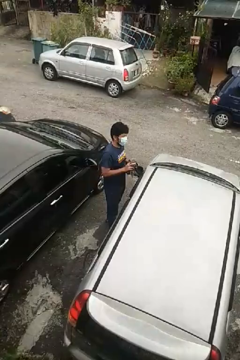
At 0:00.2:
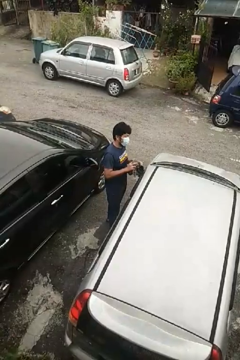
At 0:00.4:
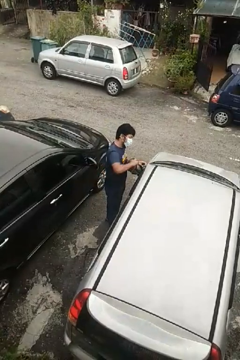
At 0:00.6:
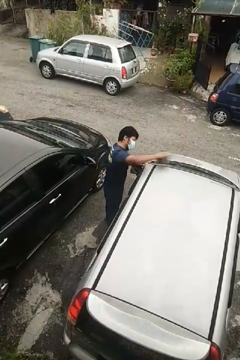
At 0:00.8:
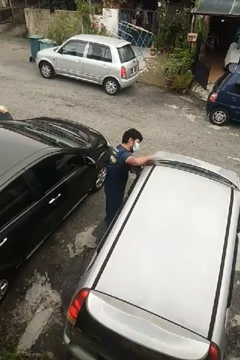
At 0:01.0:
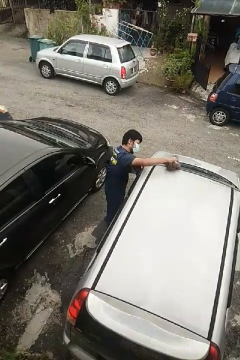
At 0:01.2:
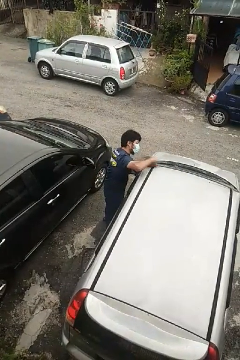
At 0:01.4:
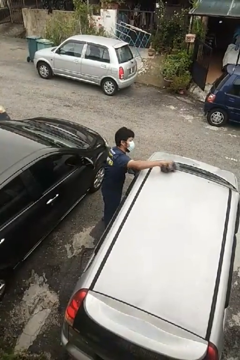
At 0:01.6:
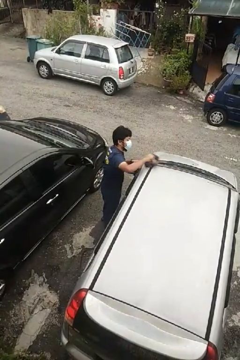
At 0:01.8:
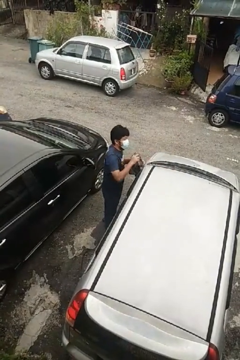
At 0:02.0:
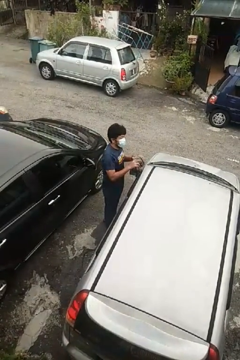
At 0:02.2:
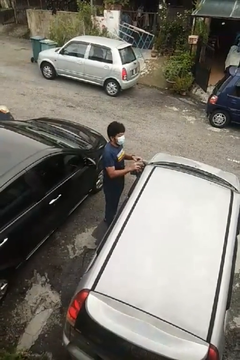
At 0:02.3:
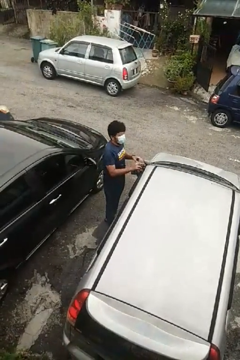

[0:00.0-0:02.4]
person polishes car with rag

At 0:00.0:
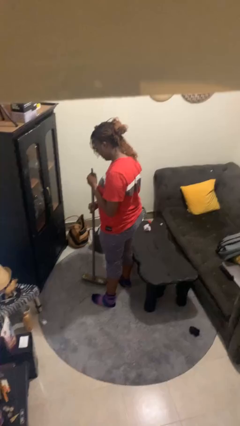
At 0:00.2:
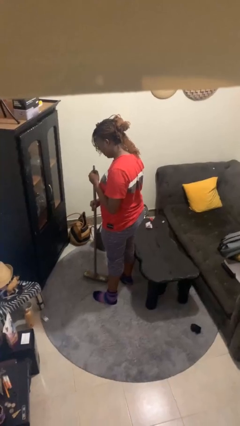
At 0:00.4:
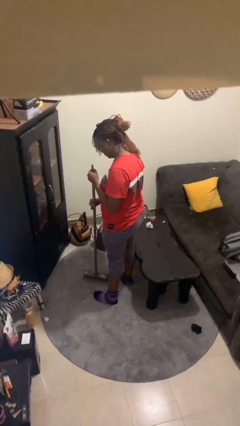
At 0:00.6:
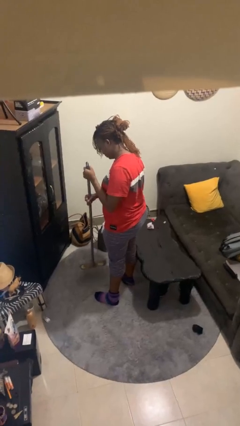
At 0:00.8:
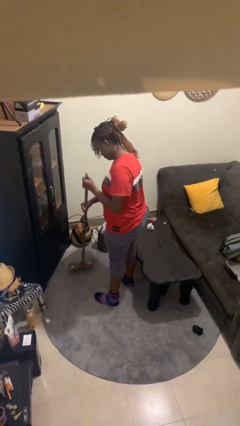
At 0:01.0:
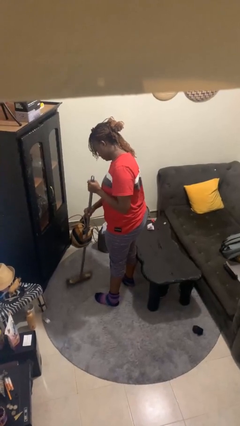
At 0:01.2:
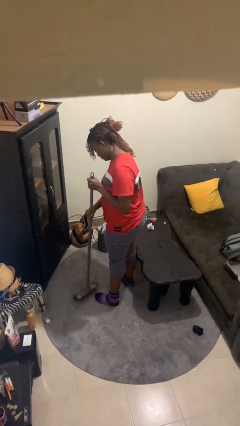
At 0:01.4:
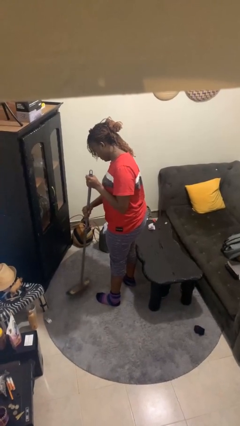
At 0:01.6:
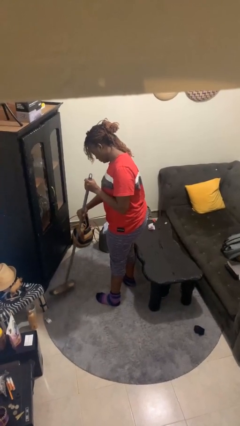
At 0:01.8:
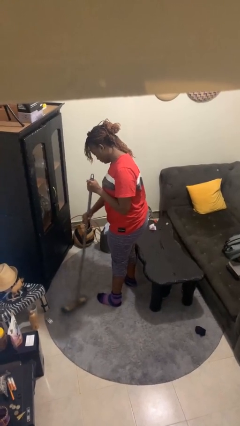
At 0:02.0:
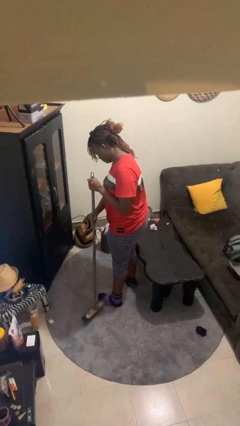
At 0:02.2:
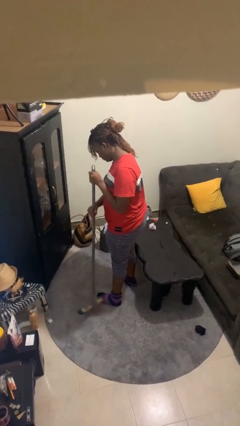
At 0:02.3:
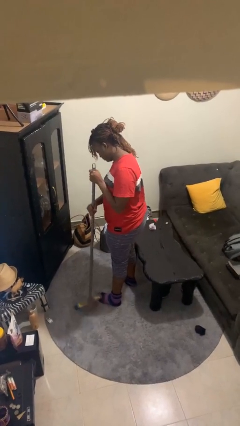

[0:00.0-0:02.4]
person sweeps floor

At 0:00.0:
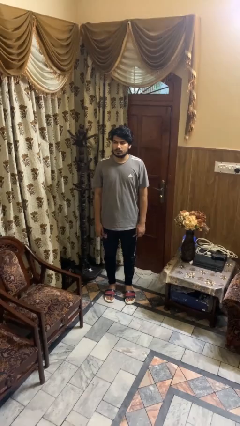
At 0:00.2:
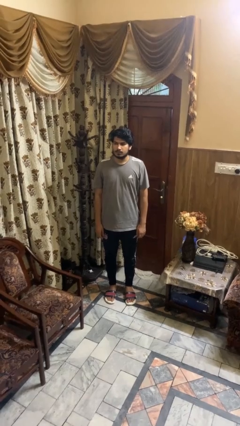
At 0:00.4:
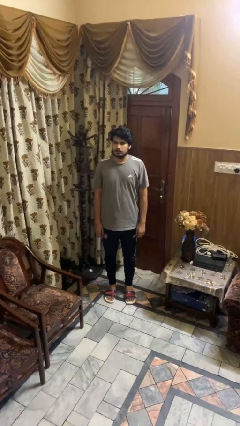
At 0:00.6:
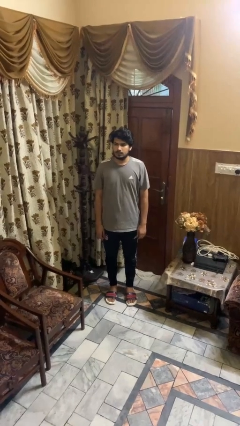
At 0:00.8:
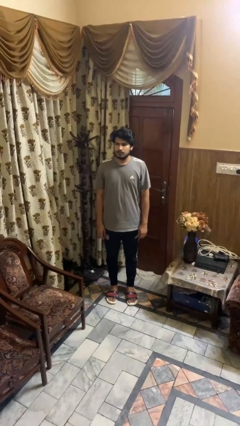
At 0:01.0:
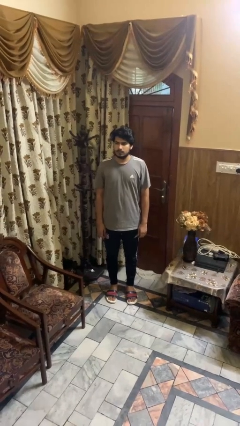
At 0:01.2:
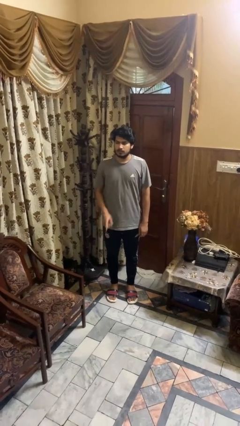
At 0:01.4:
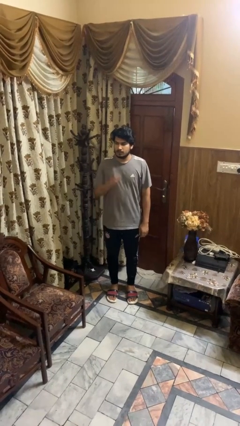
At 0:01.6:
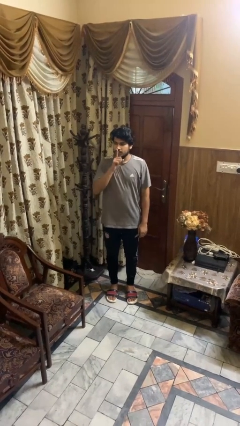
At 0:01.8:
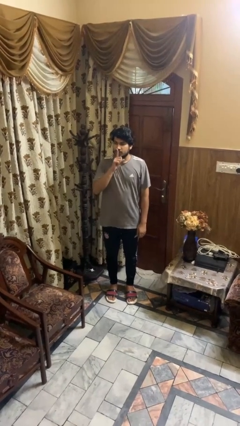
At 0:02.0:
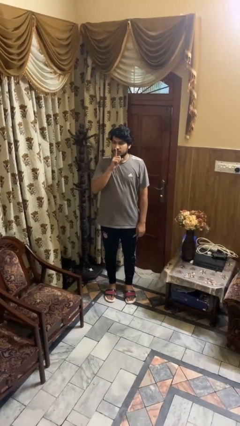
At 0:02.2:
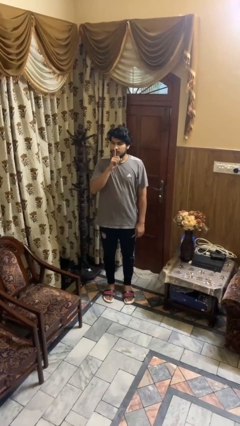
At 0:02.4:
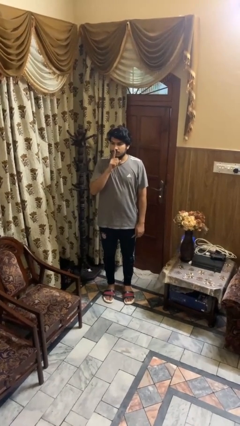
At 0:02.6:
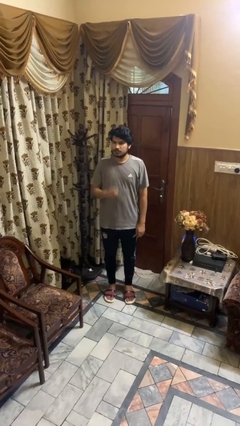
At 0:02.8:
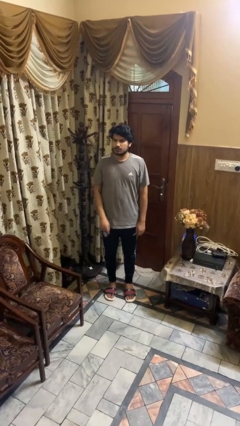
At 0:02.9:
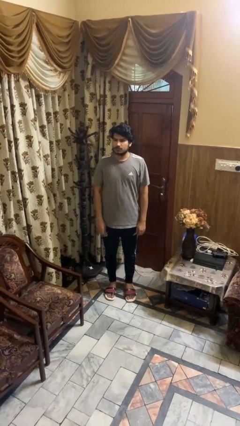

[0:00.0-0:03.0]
person gestures be quiet

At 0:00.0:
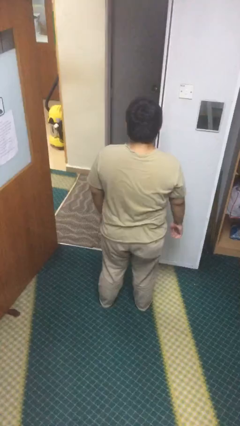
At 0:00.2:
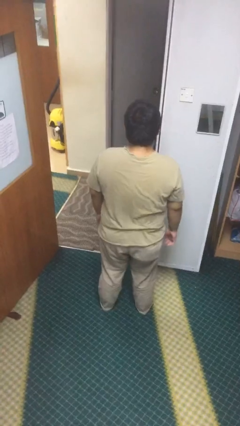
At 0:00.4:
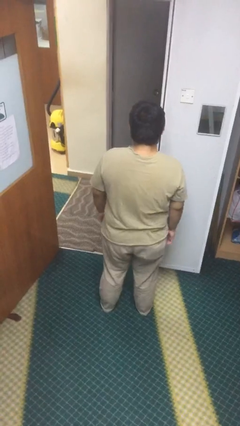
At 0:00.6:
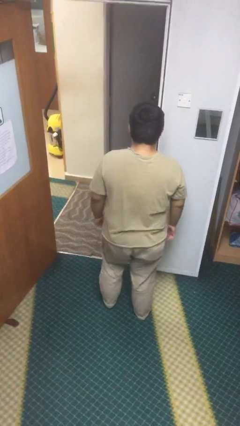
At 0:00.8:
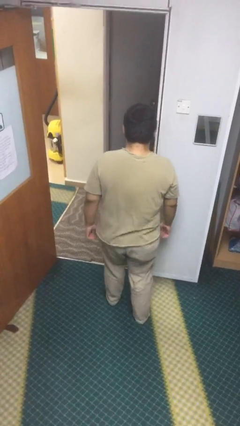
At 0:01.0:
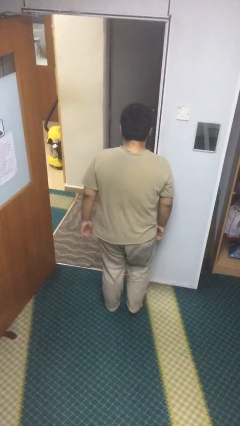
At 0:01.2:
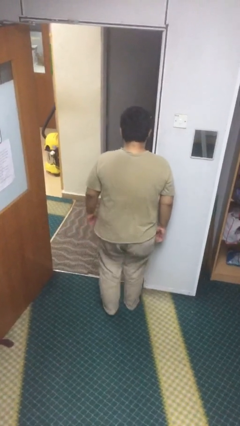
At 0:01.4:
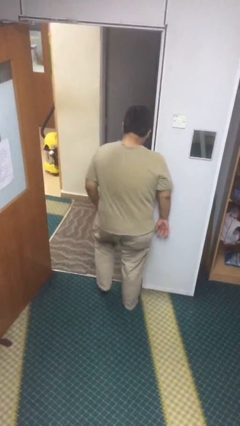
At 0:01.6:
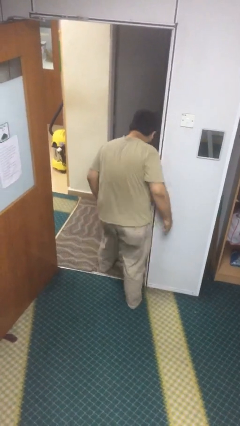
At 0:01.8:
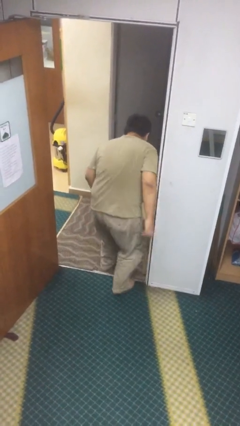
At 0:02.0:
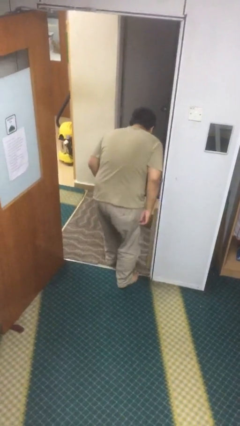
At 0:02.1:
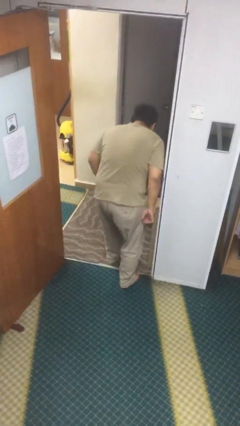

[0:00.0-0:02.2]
person bumps into wall

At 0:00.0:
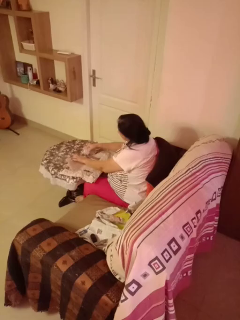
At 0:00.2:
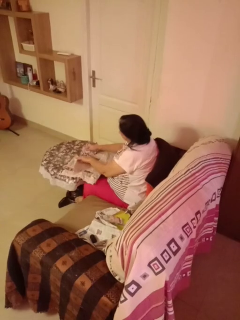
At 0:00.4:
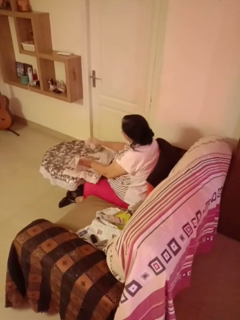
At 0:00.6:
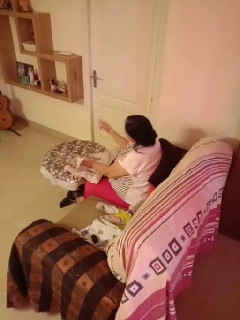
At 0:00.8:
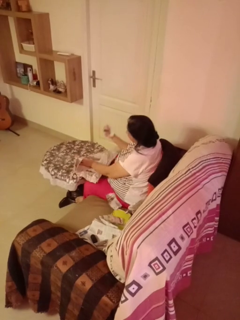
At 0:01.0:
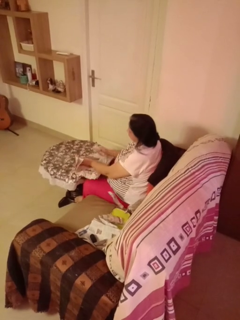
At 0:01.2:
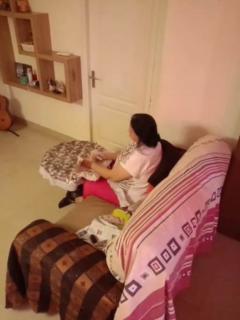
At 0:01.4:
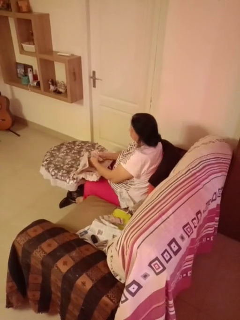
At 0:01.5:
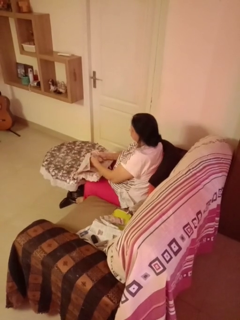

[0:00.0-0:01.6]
person tears paper

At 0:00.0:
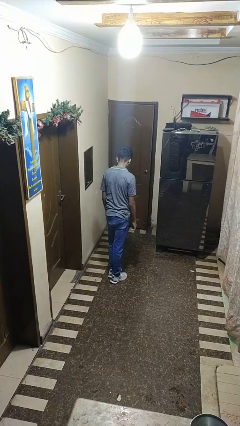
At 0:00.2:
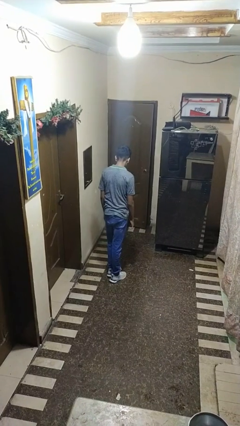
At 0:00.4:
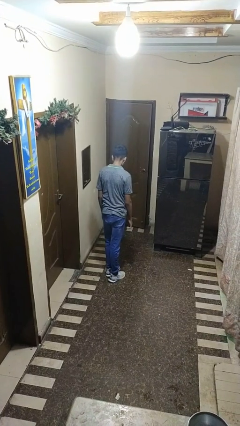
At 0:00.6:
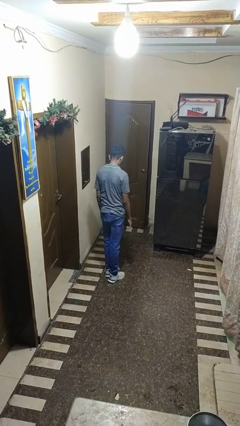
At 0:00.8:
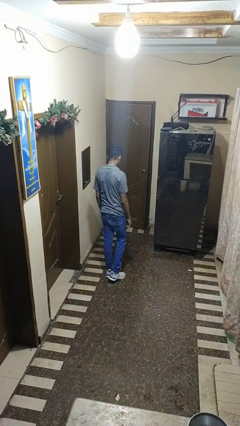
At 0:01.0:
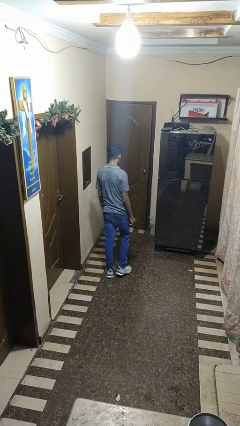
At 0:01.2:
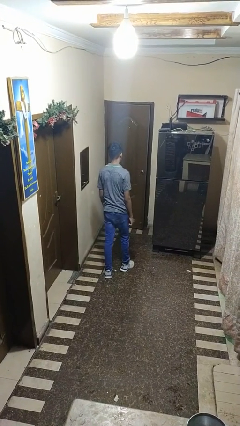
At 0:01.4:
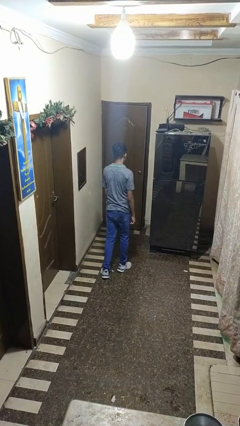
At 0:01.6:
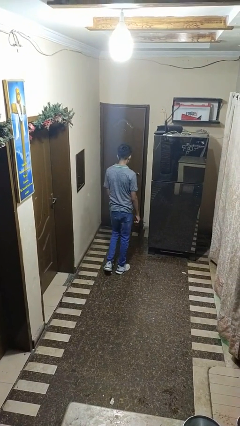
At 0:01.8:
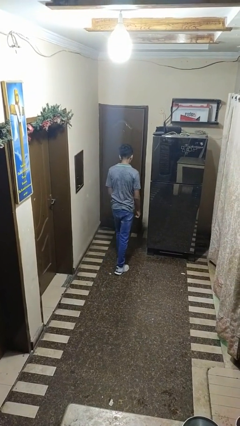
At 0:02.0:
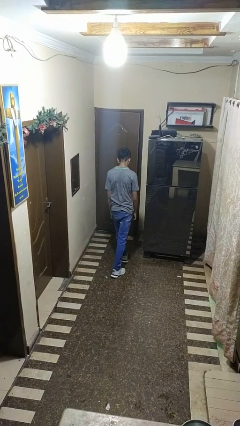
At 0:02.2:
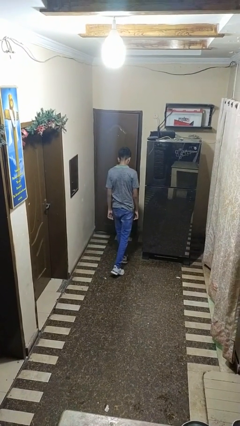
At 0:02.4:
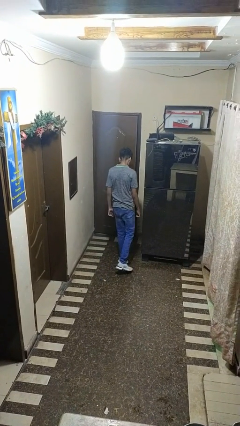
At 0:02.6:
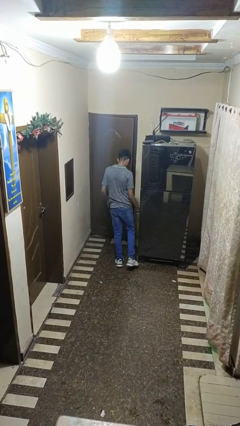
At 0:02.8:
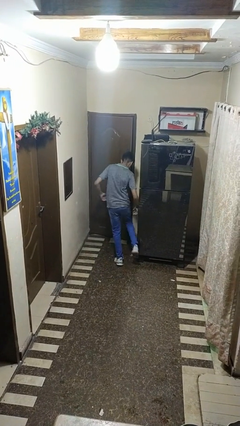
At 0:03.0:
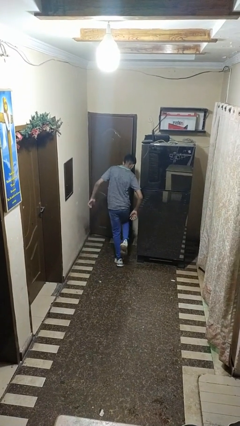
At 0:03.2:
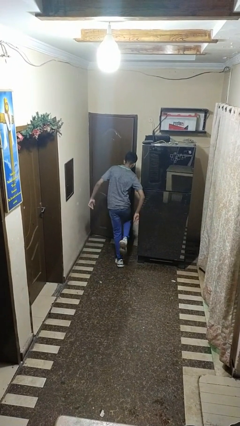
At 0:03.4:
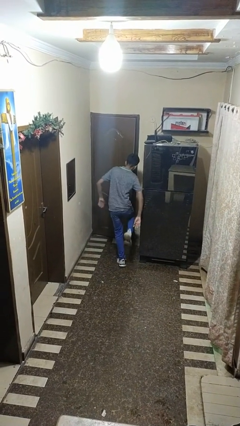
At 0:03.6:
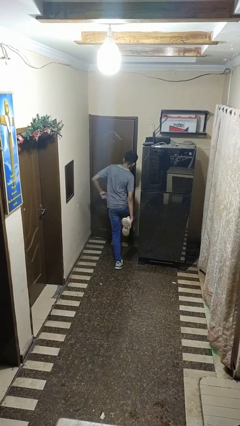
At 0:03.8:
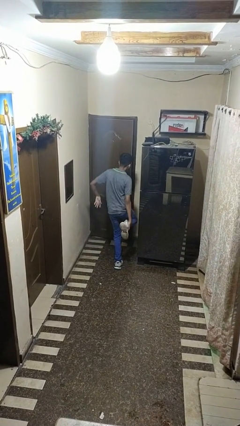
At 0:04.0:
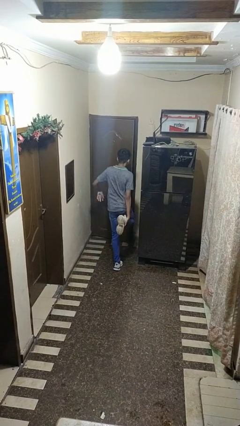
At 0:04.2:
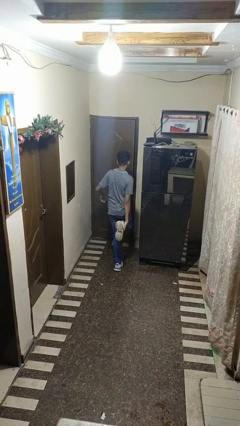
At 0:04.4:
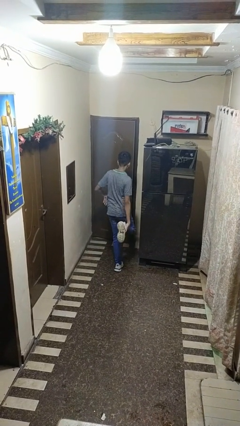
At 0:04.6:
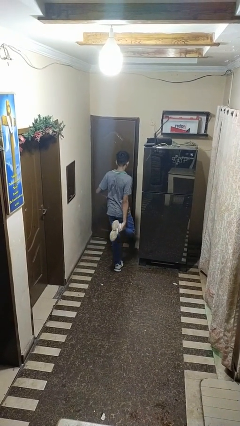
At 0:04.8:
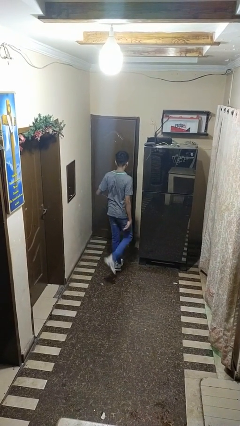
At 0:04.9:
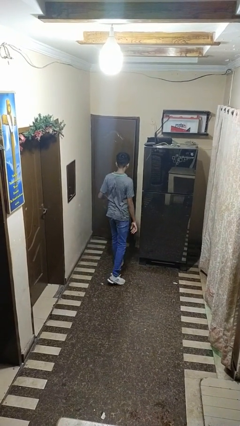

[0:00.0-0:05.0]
person stubs toe

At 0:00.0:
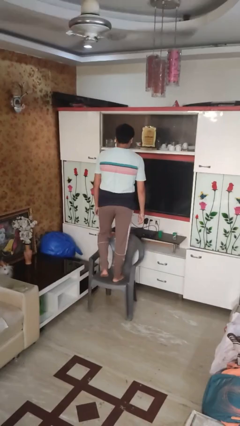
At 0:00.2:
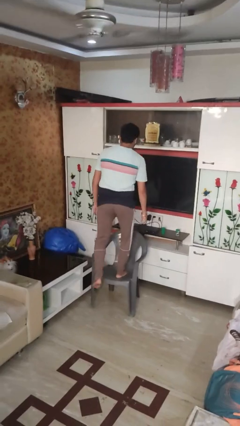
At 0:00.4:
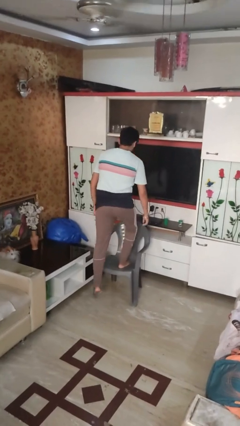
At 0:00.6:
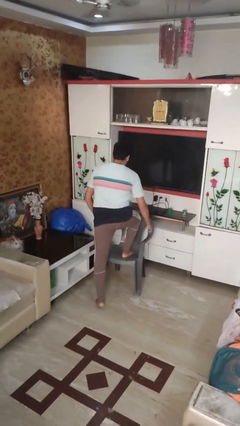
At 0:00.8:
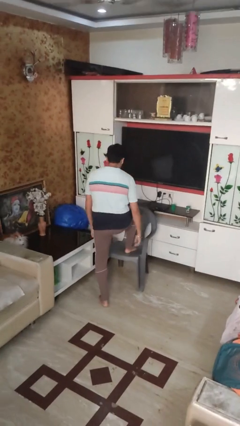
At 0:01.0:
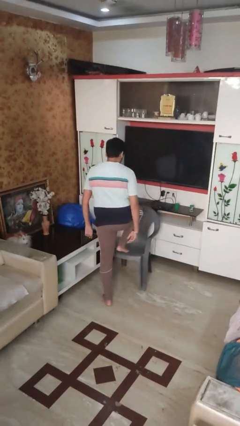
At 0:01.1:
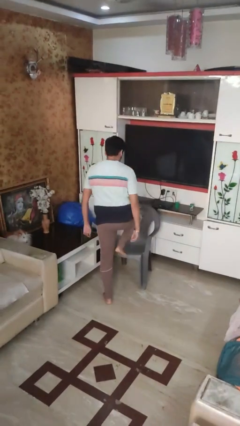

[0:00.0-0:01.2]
person climbs off chair

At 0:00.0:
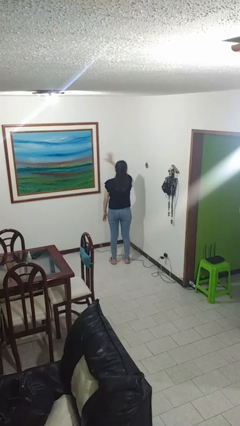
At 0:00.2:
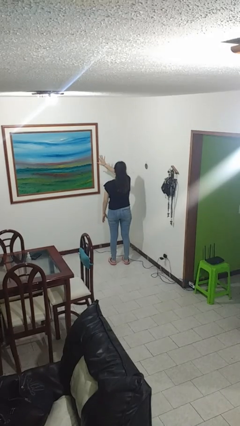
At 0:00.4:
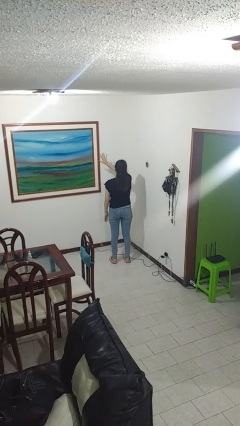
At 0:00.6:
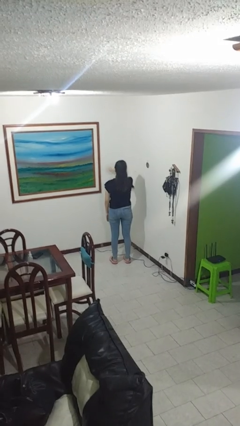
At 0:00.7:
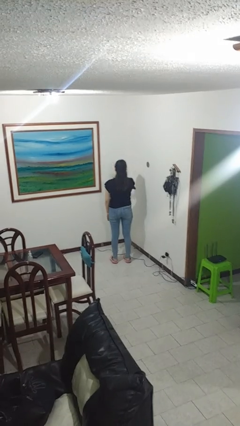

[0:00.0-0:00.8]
person gestures number five
